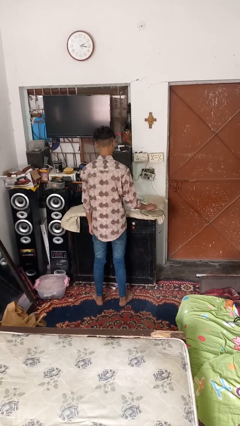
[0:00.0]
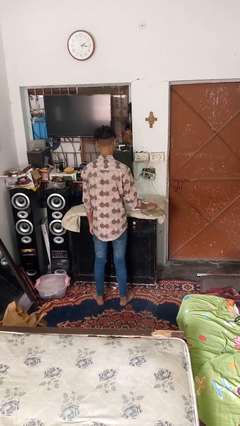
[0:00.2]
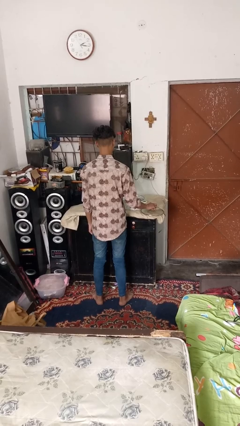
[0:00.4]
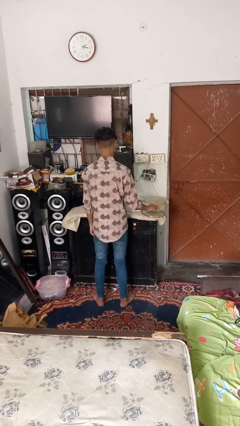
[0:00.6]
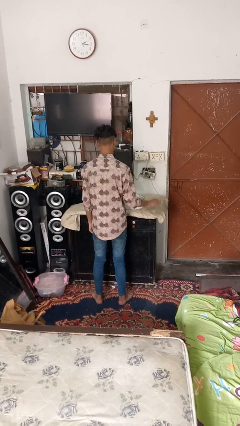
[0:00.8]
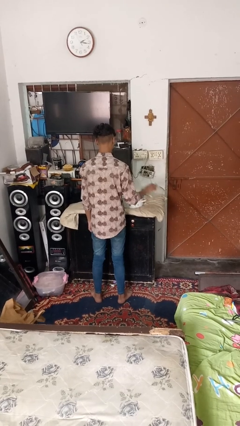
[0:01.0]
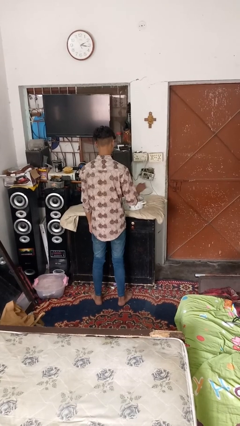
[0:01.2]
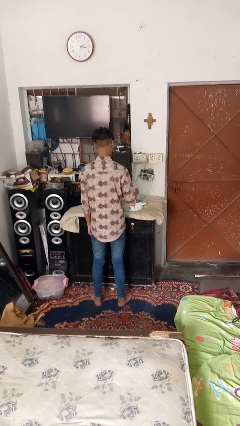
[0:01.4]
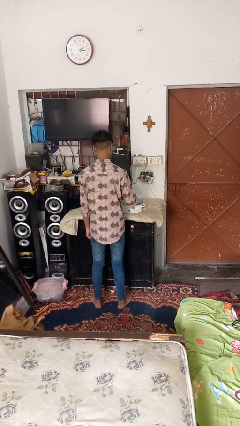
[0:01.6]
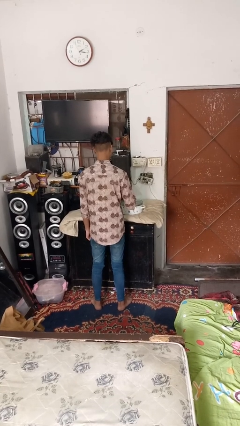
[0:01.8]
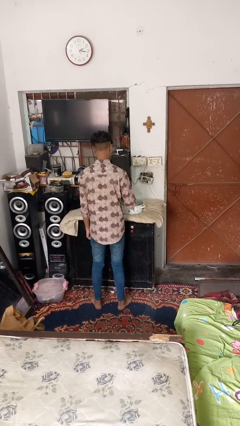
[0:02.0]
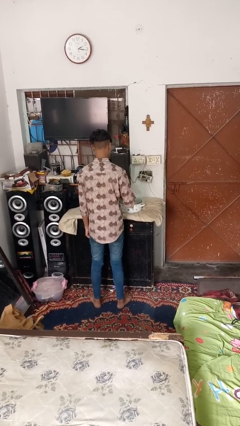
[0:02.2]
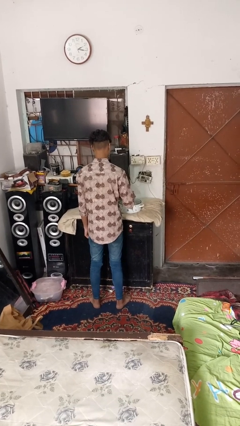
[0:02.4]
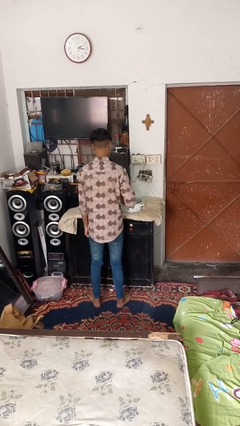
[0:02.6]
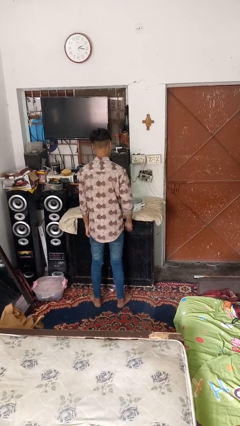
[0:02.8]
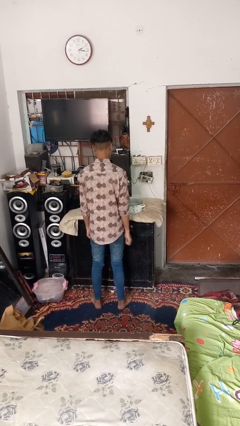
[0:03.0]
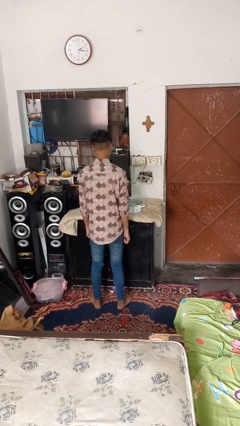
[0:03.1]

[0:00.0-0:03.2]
person closes jar

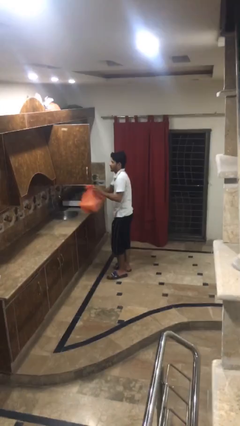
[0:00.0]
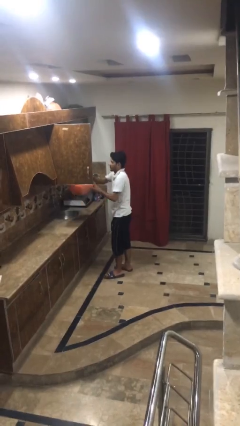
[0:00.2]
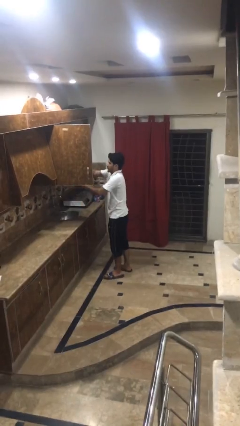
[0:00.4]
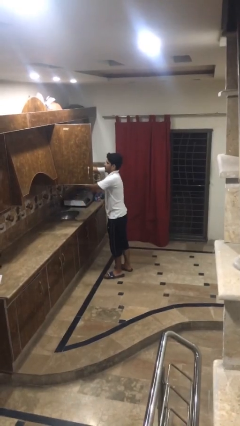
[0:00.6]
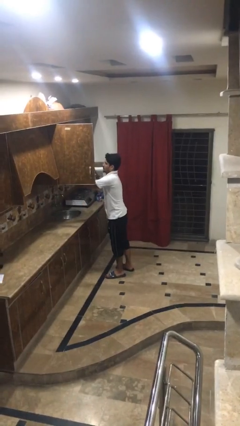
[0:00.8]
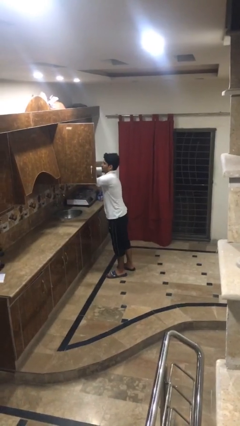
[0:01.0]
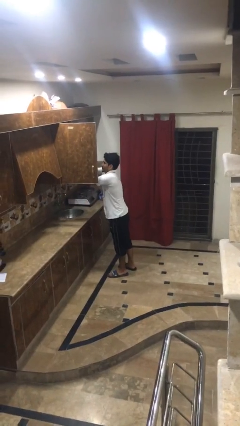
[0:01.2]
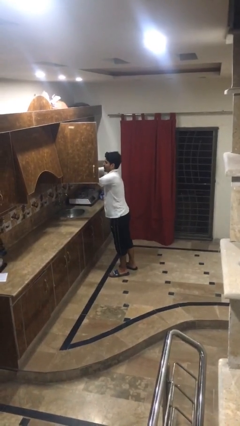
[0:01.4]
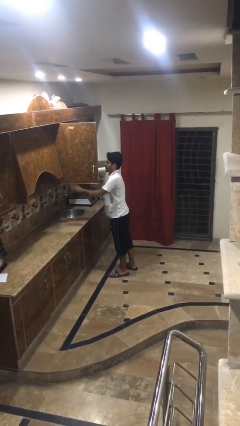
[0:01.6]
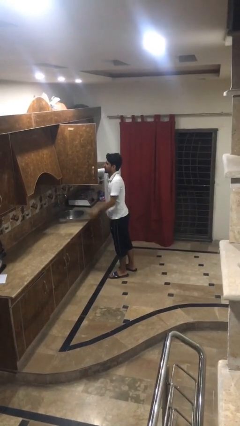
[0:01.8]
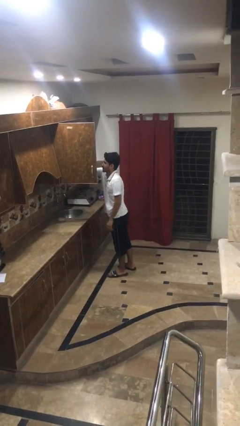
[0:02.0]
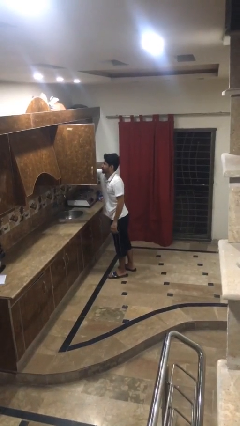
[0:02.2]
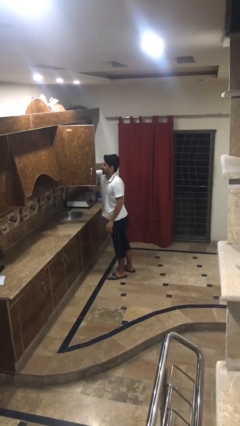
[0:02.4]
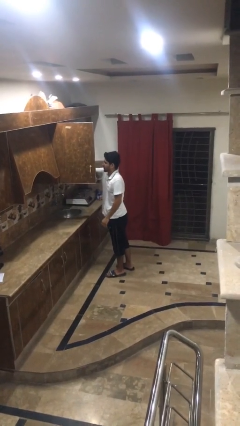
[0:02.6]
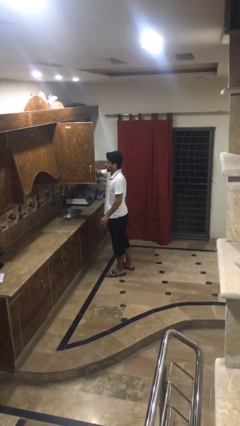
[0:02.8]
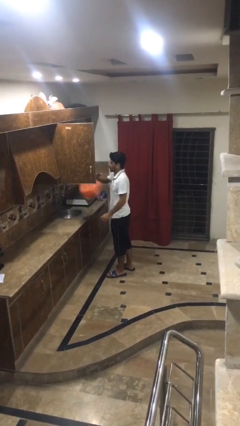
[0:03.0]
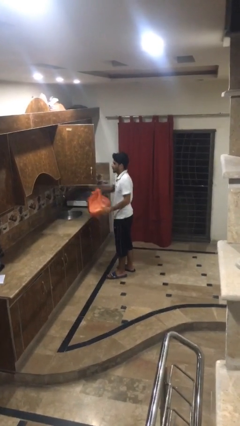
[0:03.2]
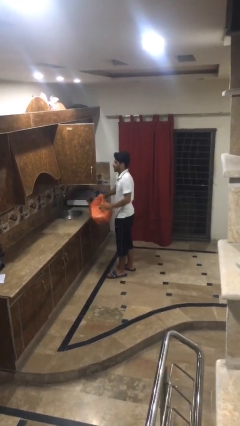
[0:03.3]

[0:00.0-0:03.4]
person loads groceries into cabinet

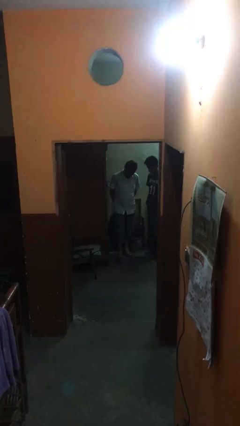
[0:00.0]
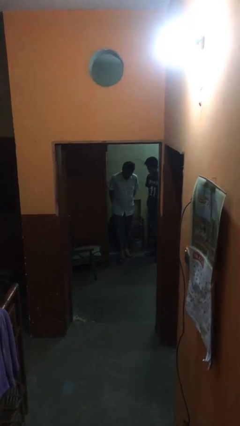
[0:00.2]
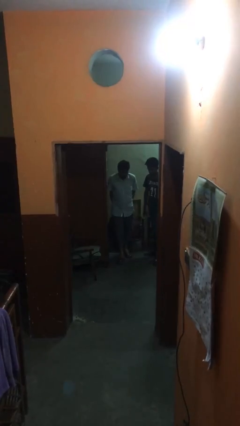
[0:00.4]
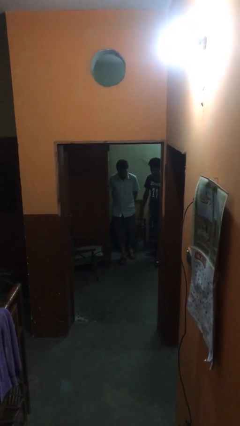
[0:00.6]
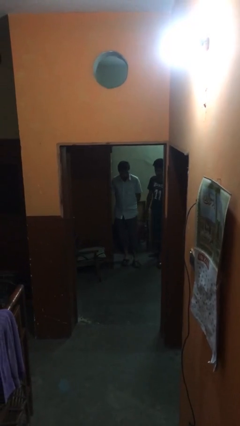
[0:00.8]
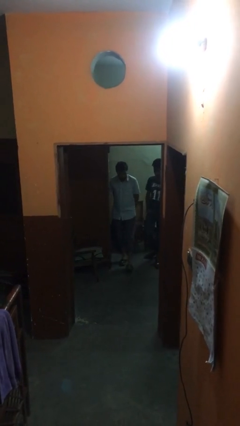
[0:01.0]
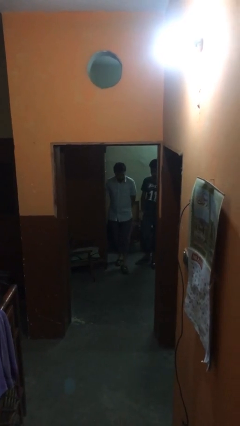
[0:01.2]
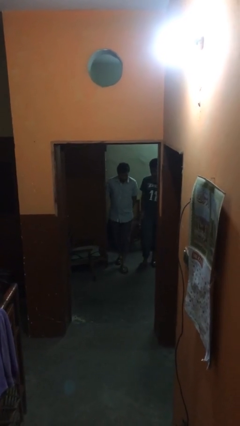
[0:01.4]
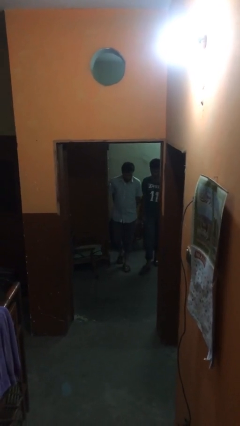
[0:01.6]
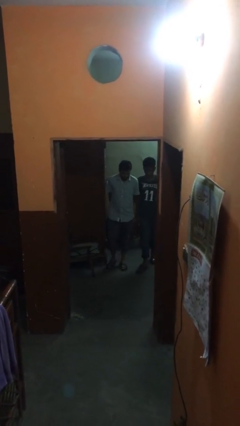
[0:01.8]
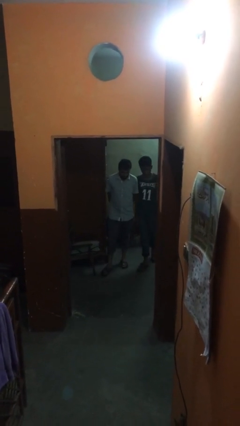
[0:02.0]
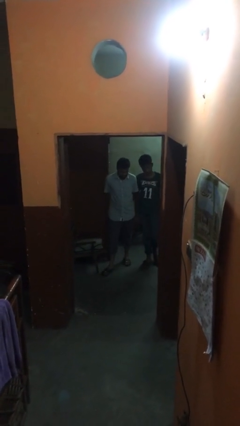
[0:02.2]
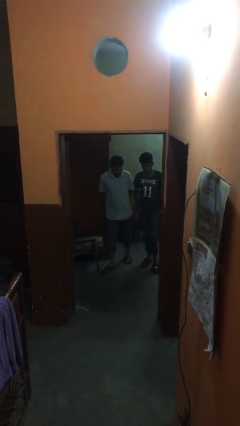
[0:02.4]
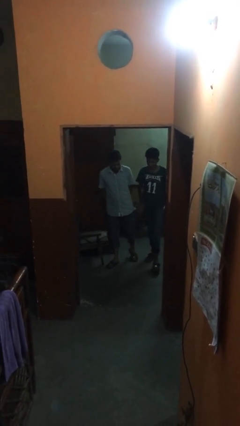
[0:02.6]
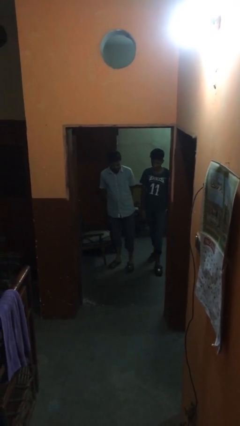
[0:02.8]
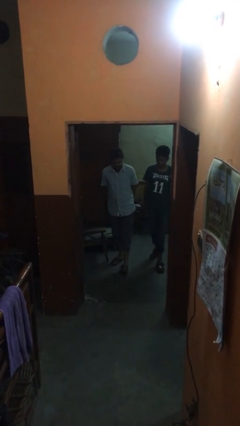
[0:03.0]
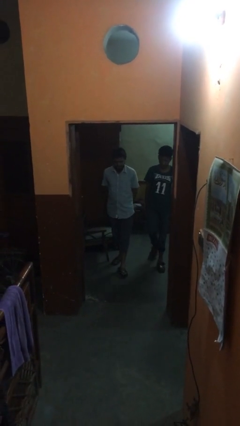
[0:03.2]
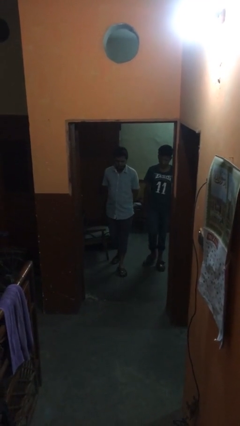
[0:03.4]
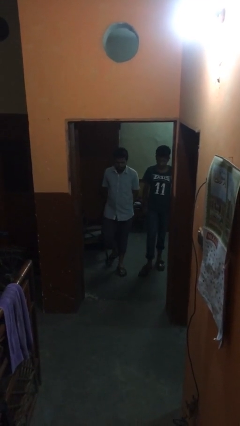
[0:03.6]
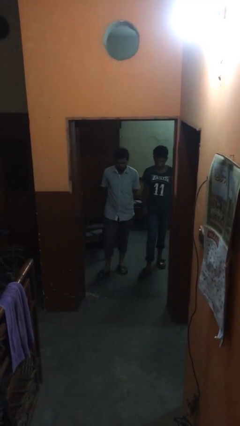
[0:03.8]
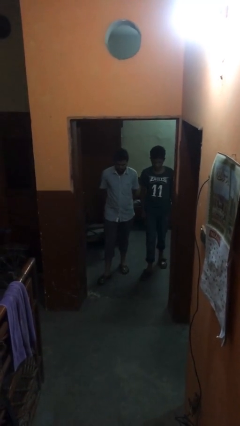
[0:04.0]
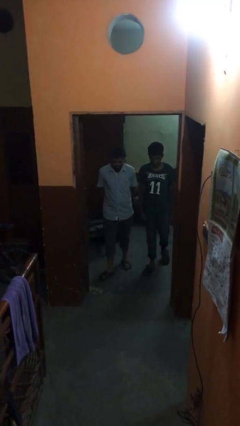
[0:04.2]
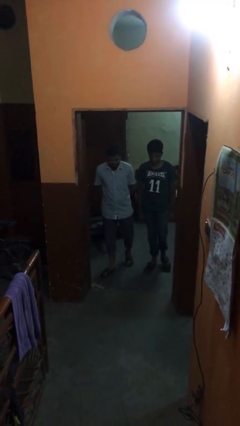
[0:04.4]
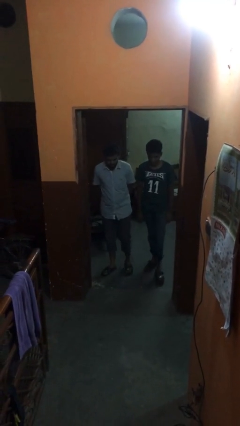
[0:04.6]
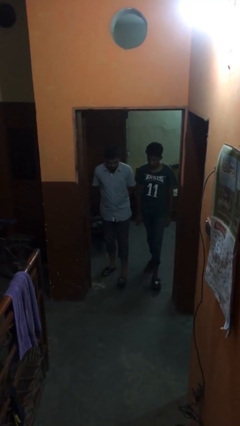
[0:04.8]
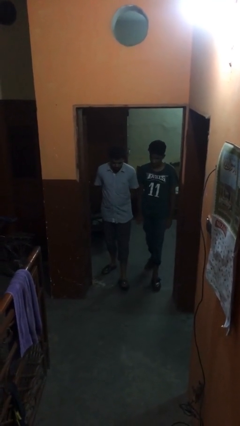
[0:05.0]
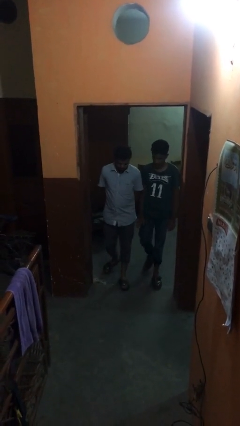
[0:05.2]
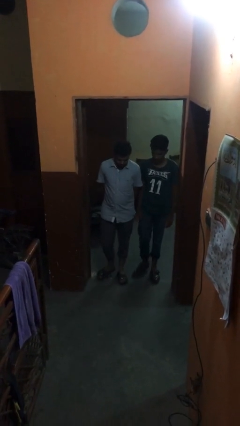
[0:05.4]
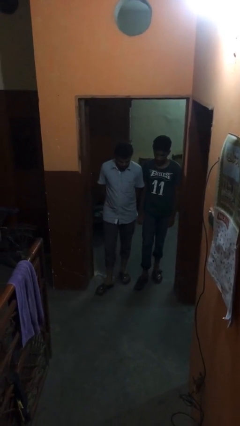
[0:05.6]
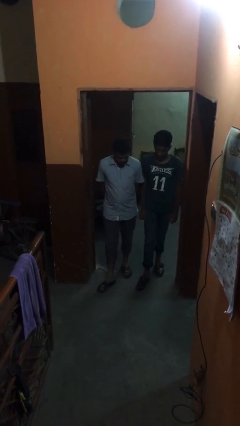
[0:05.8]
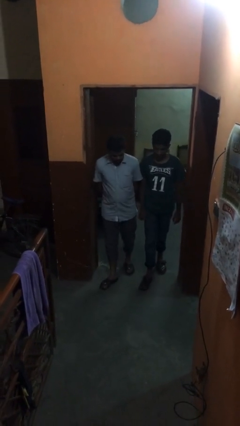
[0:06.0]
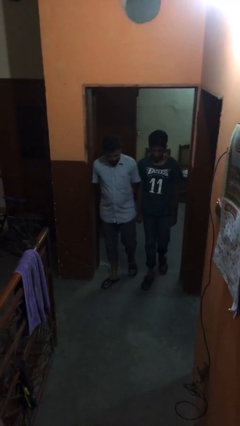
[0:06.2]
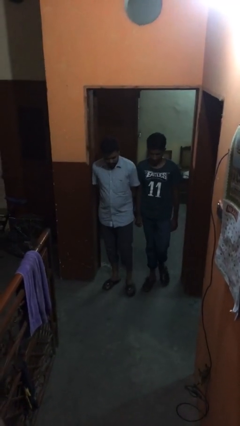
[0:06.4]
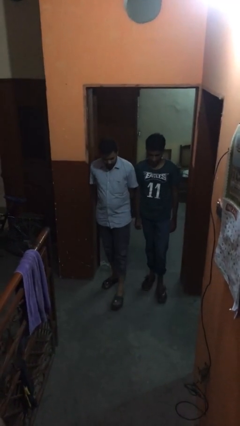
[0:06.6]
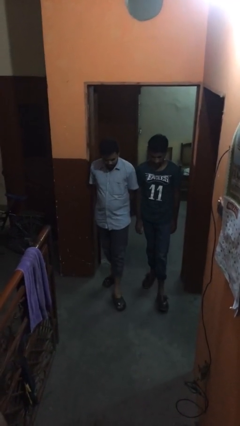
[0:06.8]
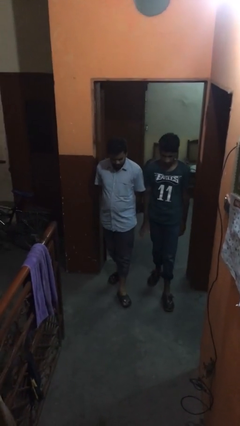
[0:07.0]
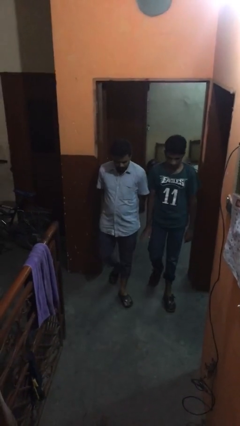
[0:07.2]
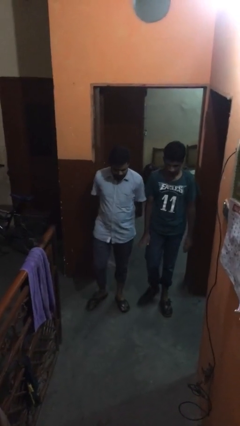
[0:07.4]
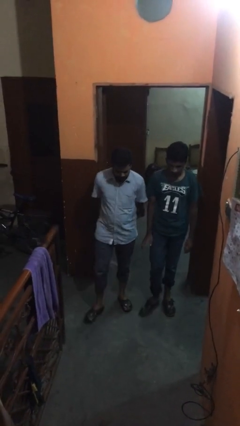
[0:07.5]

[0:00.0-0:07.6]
person talks to person

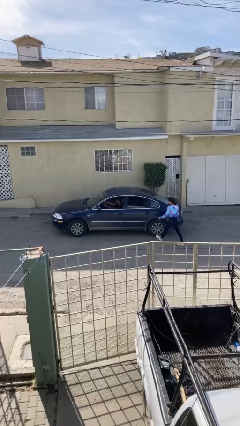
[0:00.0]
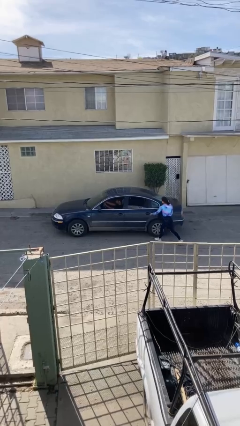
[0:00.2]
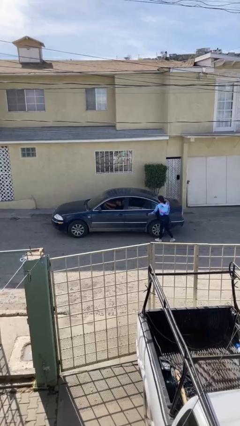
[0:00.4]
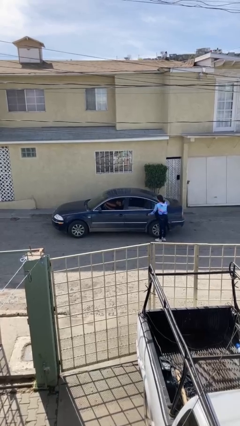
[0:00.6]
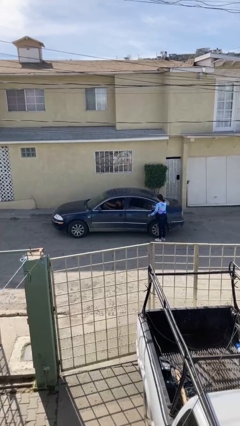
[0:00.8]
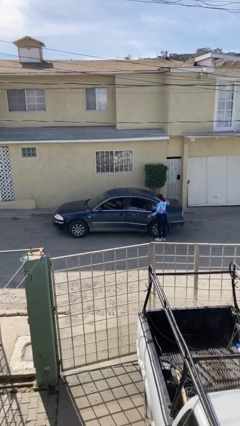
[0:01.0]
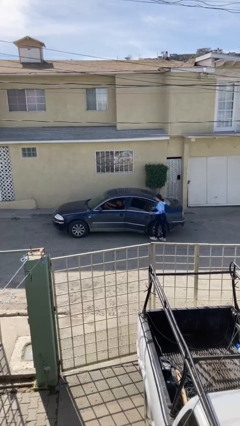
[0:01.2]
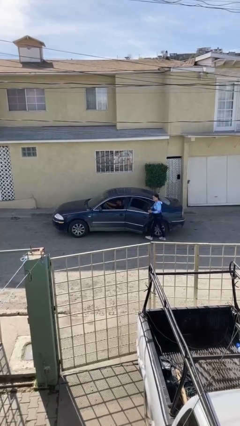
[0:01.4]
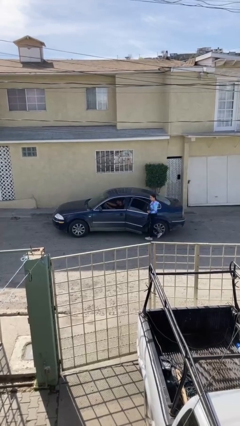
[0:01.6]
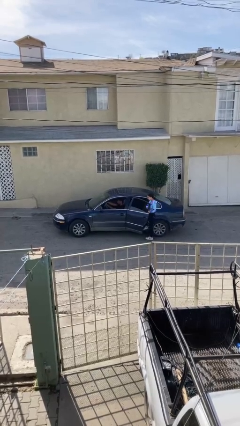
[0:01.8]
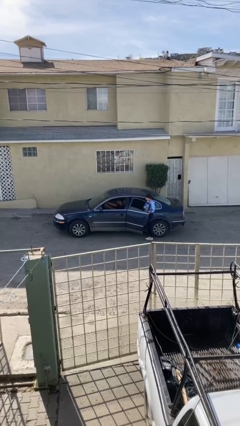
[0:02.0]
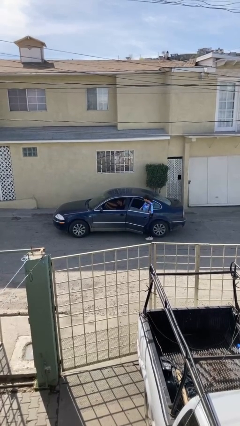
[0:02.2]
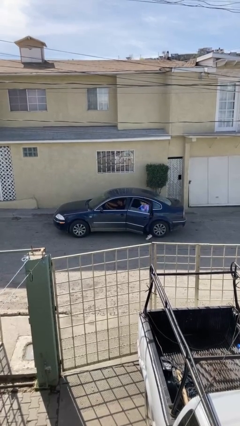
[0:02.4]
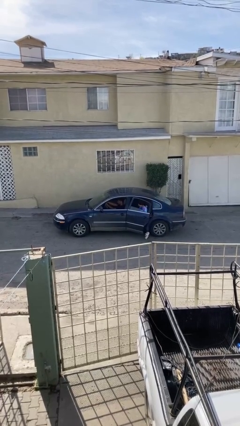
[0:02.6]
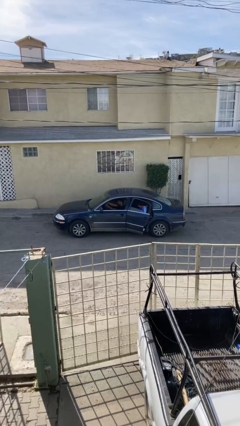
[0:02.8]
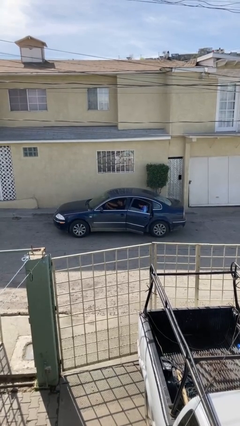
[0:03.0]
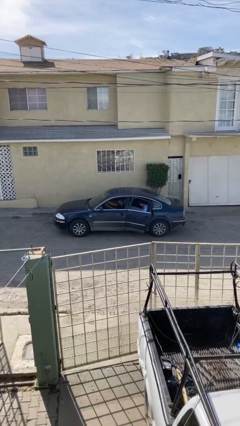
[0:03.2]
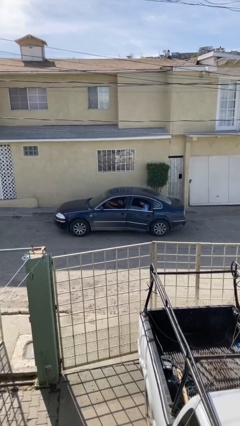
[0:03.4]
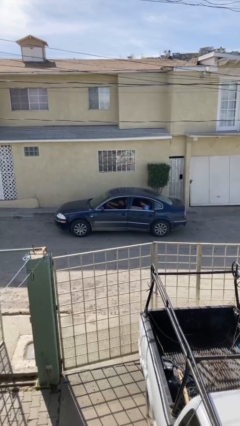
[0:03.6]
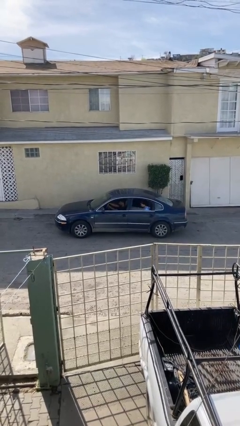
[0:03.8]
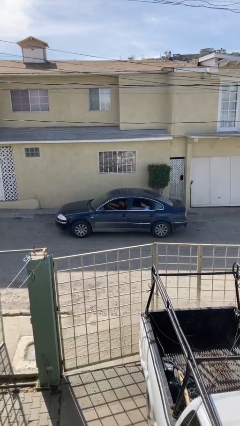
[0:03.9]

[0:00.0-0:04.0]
car picks up person
